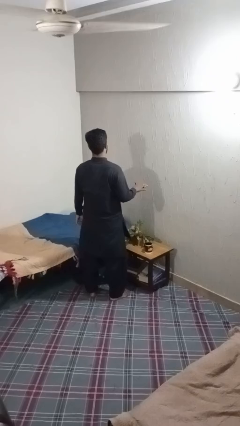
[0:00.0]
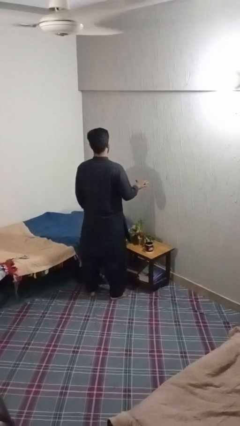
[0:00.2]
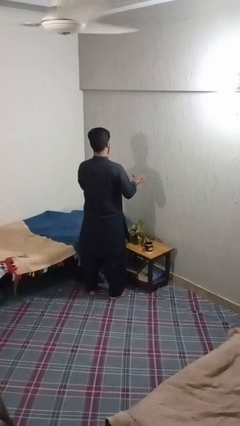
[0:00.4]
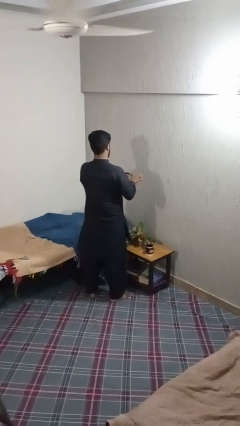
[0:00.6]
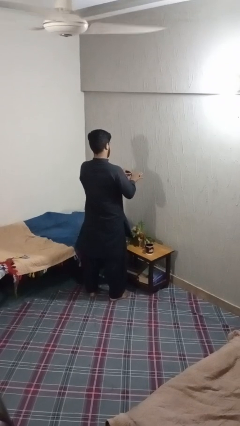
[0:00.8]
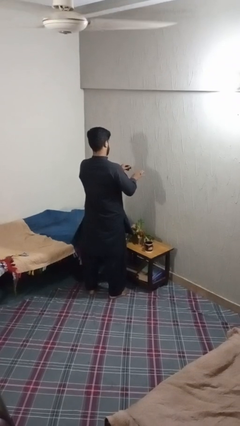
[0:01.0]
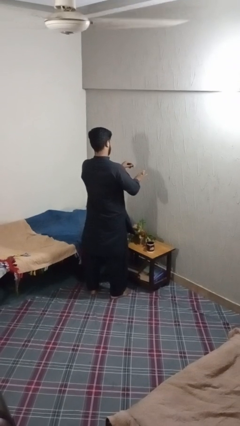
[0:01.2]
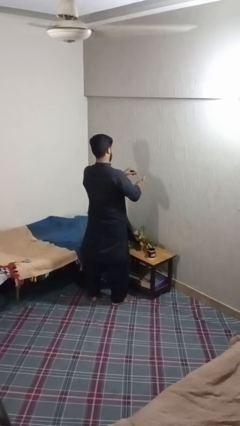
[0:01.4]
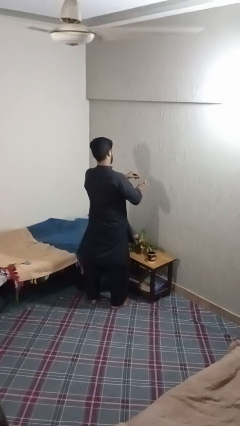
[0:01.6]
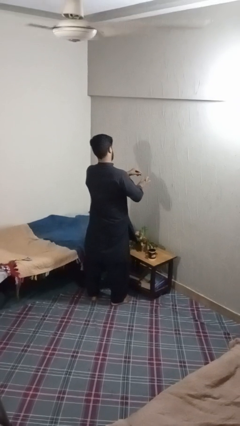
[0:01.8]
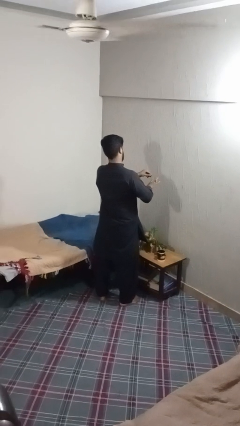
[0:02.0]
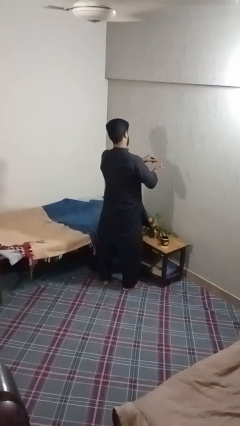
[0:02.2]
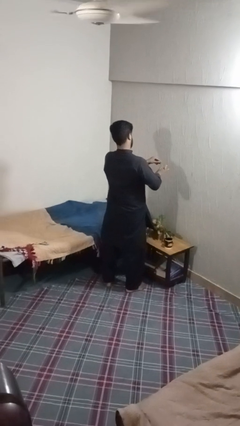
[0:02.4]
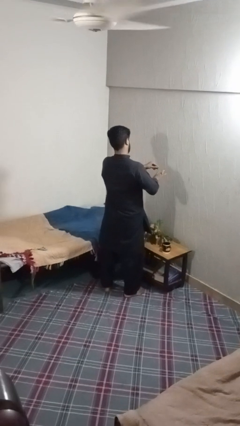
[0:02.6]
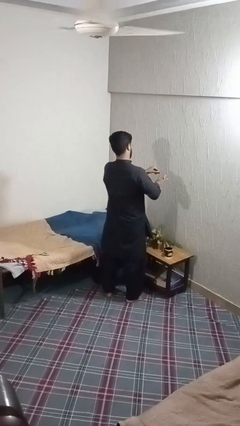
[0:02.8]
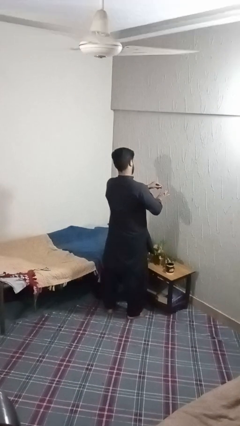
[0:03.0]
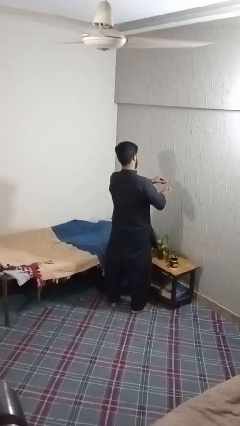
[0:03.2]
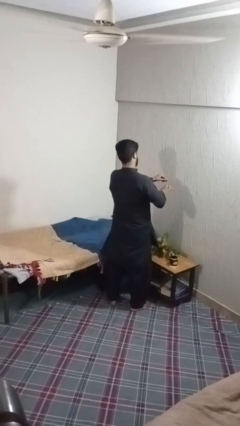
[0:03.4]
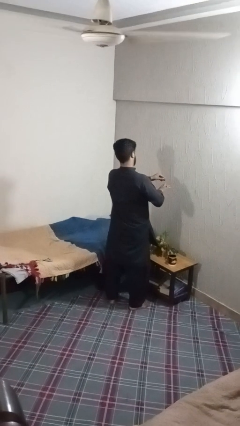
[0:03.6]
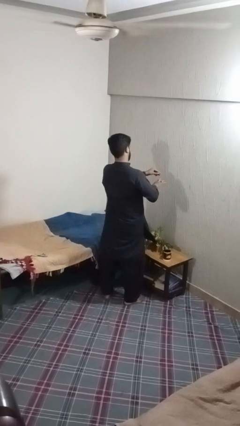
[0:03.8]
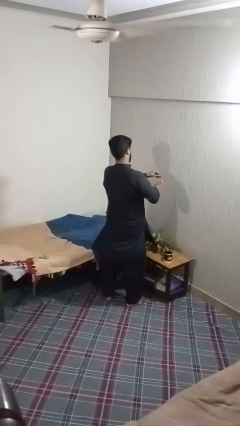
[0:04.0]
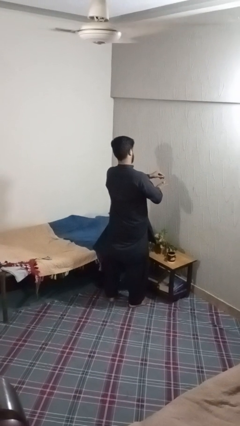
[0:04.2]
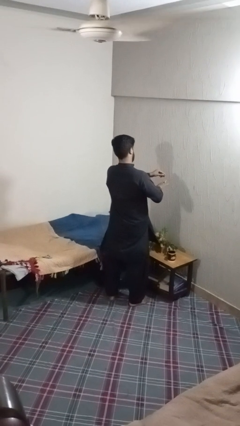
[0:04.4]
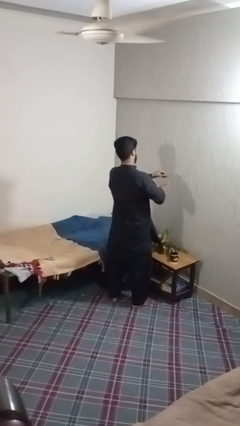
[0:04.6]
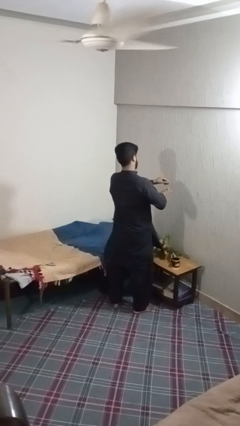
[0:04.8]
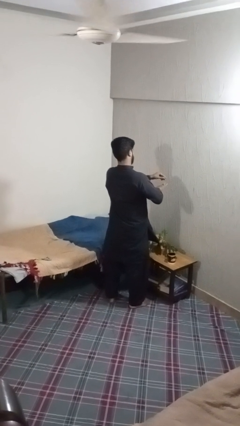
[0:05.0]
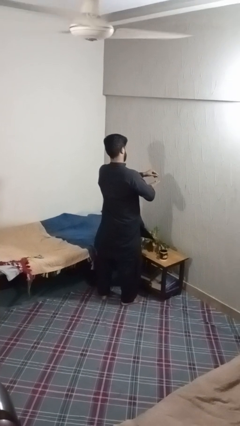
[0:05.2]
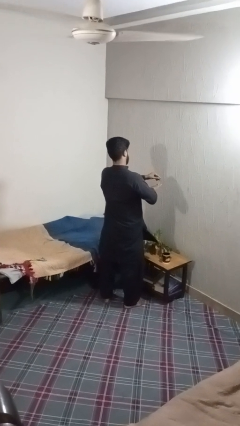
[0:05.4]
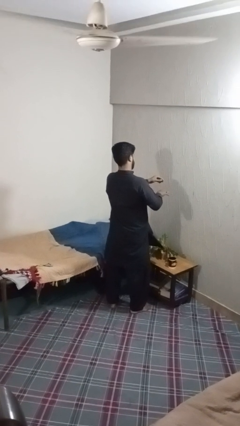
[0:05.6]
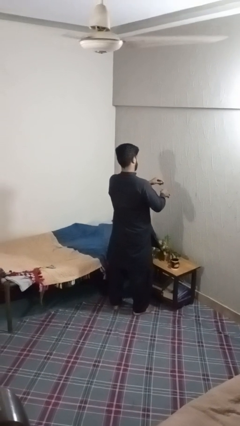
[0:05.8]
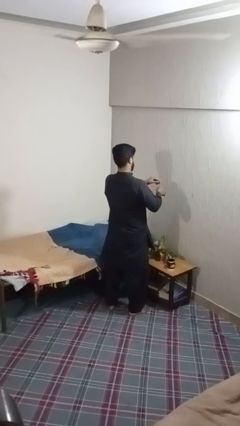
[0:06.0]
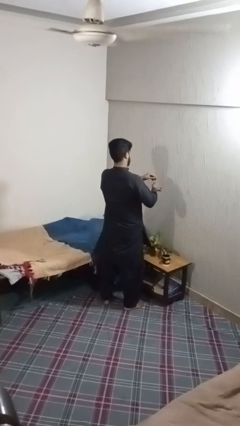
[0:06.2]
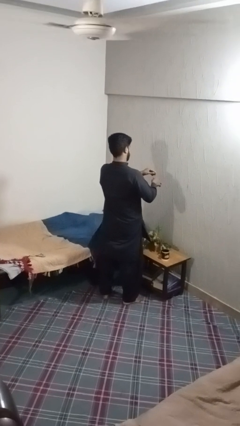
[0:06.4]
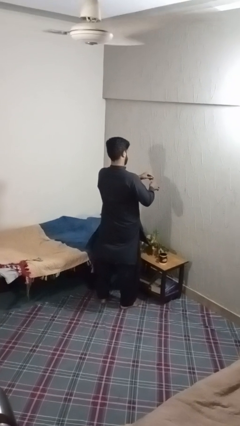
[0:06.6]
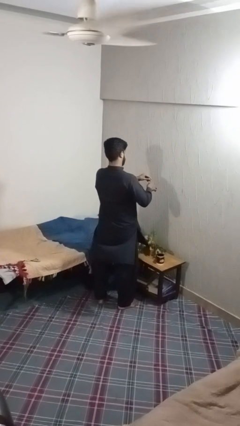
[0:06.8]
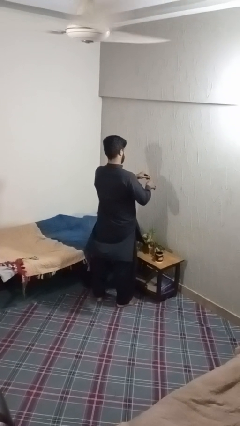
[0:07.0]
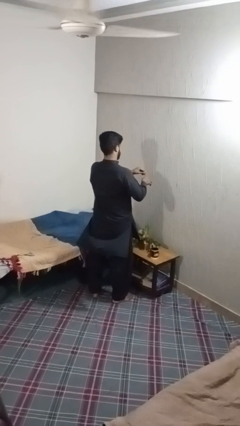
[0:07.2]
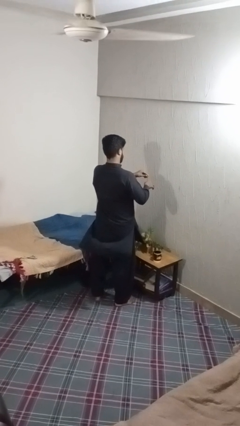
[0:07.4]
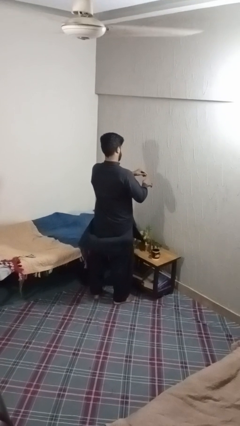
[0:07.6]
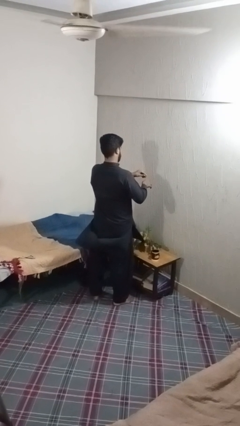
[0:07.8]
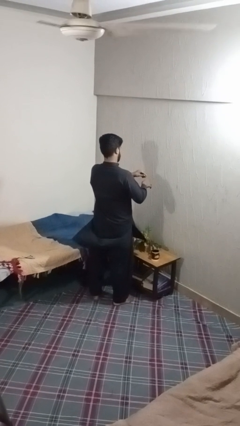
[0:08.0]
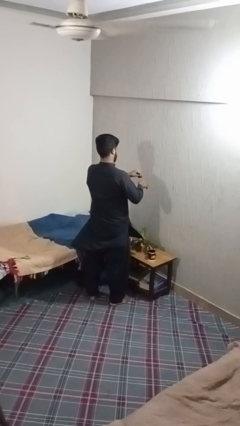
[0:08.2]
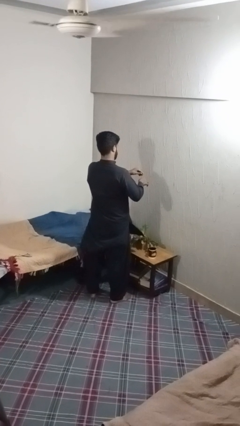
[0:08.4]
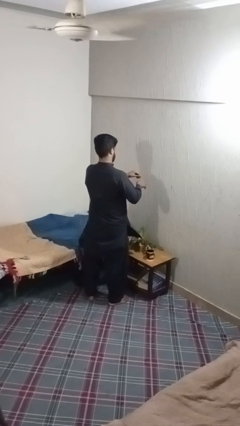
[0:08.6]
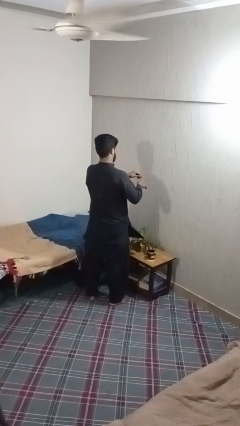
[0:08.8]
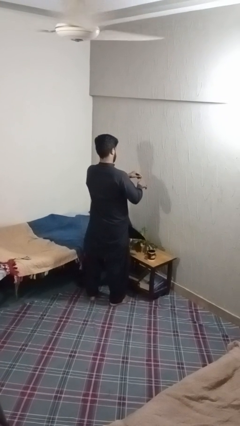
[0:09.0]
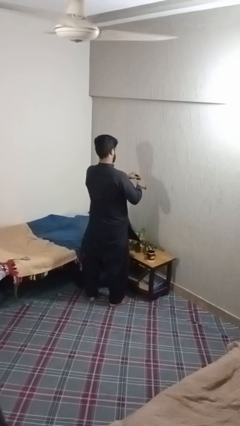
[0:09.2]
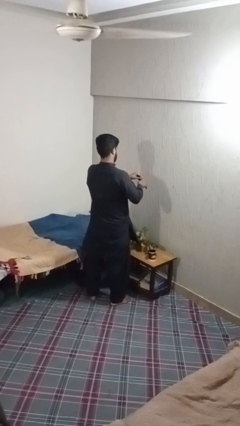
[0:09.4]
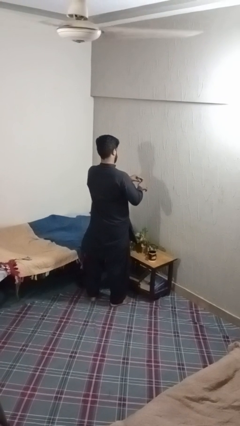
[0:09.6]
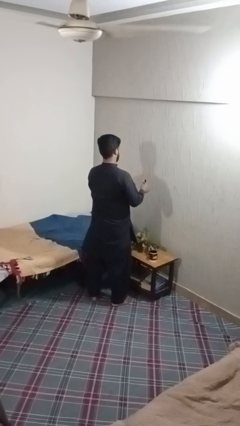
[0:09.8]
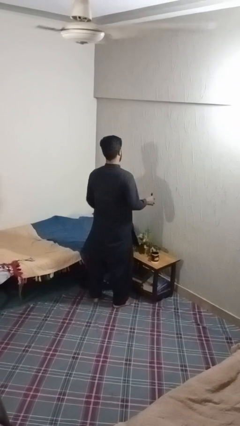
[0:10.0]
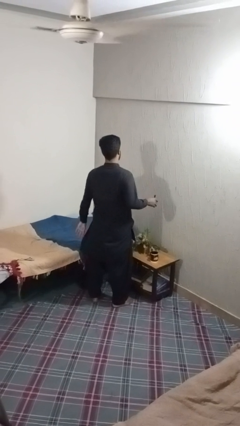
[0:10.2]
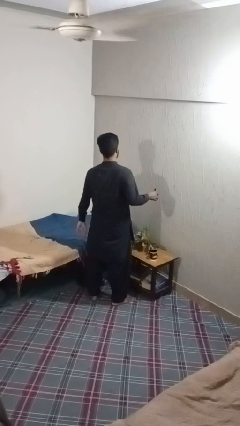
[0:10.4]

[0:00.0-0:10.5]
person paints fingernails

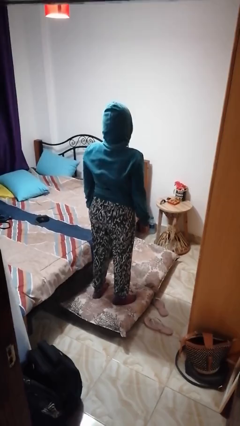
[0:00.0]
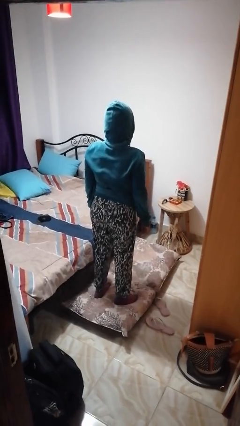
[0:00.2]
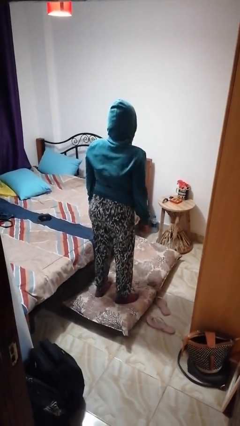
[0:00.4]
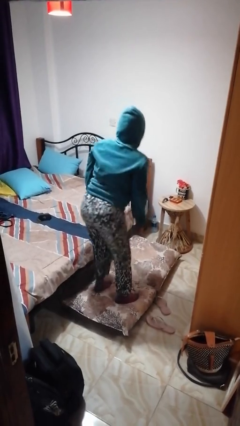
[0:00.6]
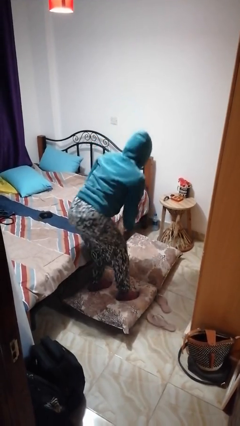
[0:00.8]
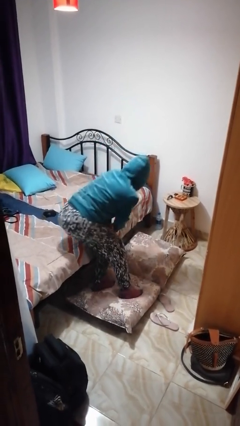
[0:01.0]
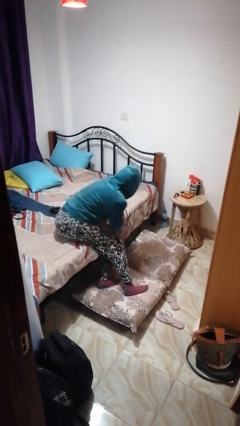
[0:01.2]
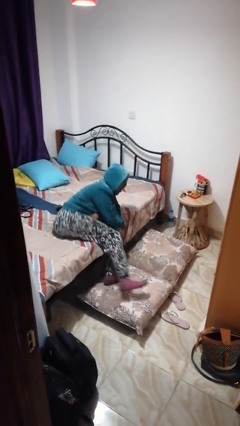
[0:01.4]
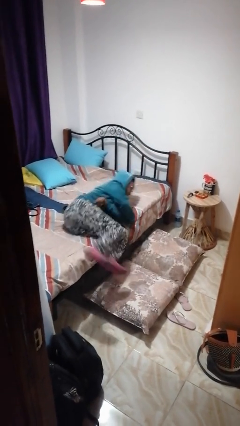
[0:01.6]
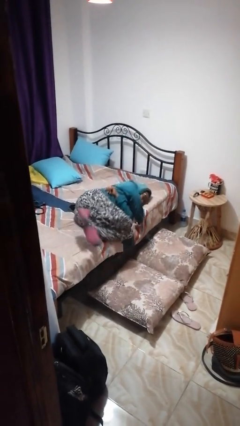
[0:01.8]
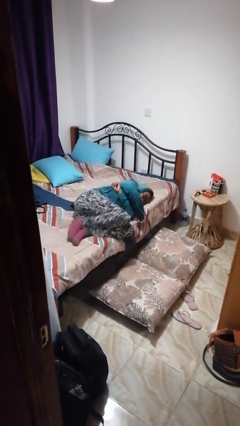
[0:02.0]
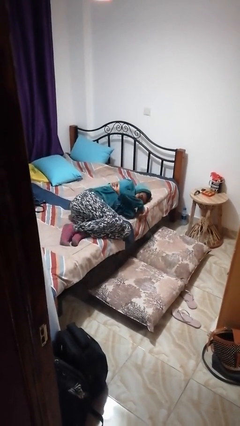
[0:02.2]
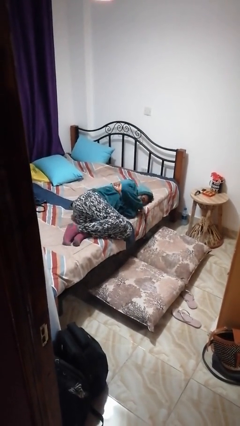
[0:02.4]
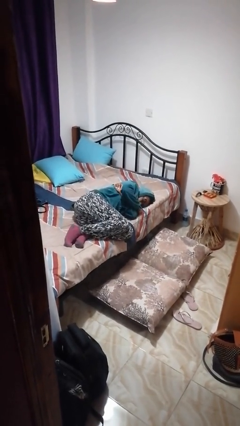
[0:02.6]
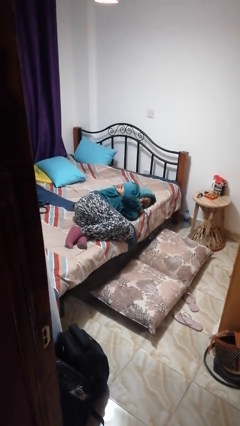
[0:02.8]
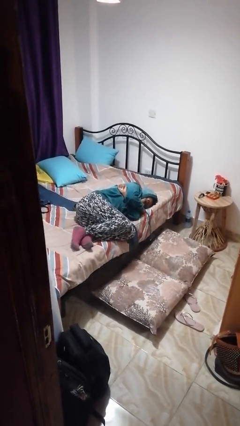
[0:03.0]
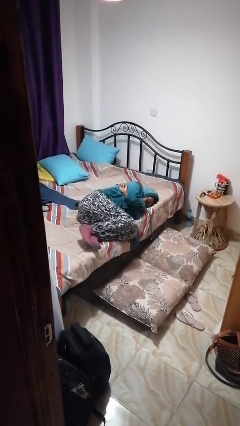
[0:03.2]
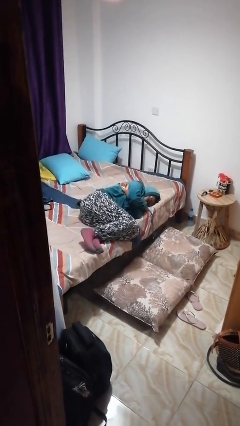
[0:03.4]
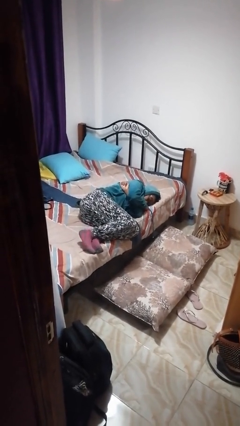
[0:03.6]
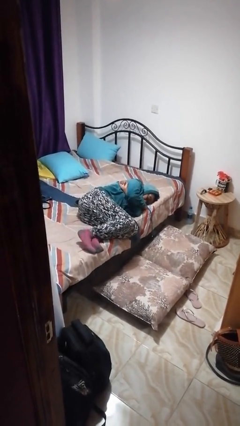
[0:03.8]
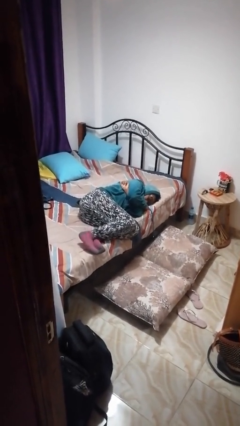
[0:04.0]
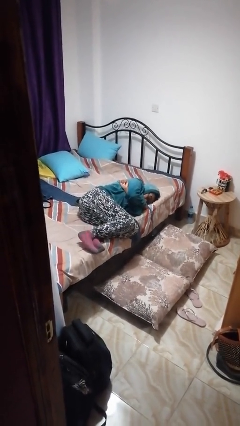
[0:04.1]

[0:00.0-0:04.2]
person lies down on bed

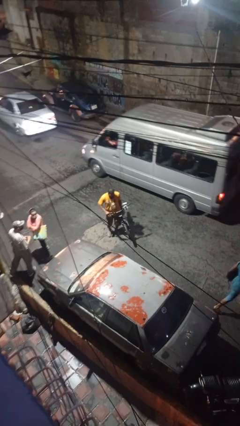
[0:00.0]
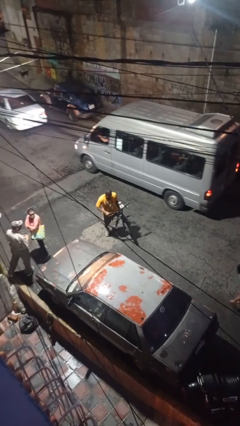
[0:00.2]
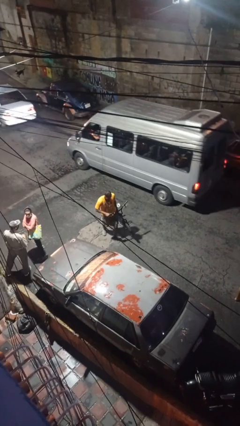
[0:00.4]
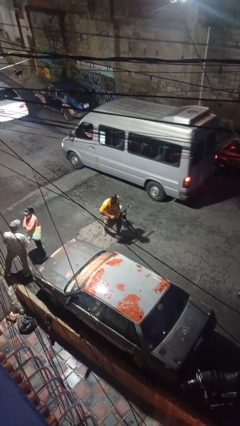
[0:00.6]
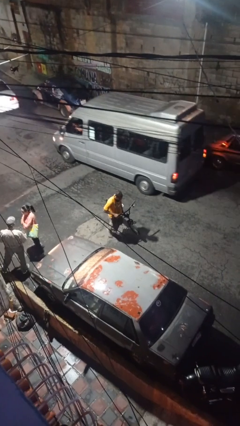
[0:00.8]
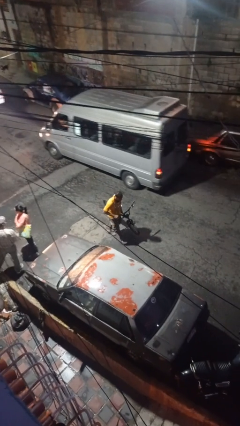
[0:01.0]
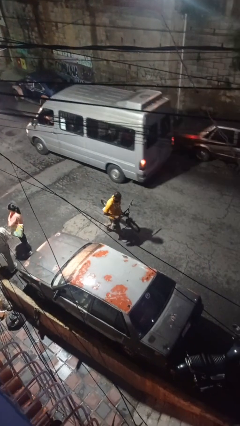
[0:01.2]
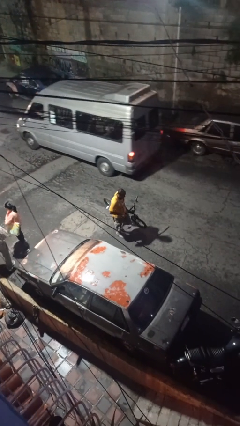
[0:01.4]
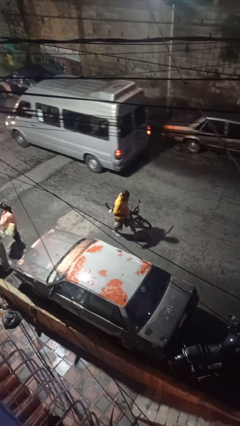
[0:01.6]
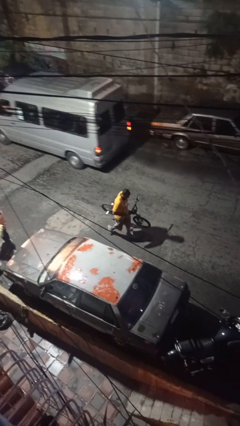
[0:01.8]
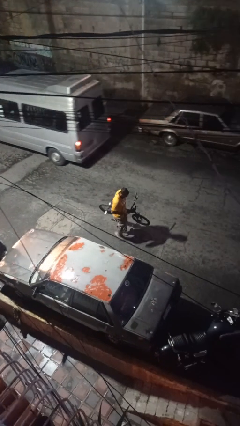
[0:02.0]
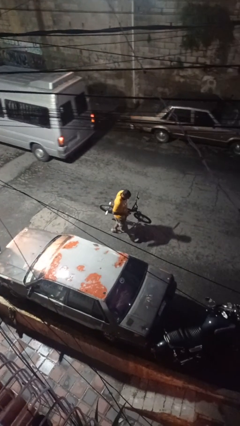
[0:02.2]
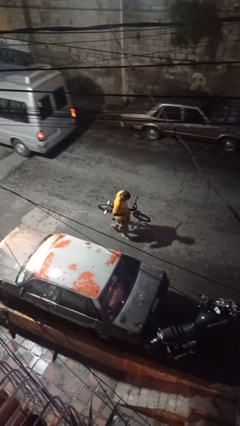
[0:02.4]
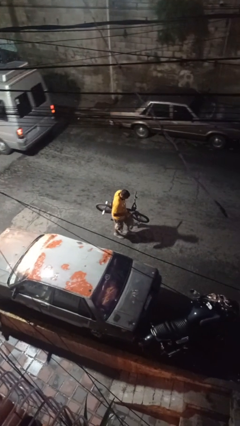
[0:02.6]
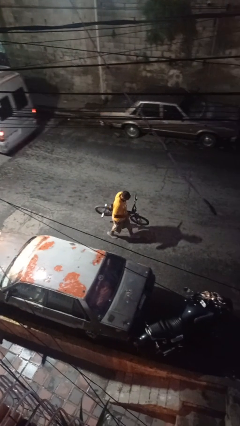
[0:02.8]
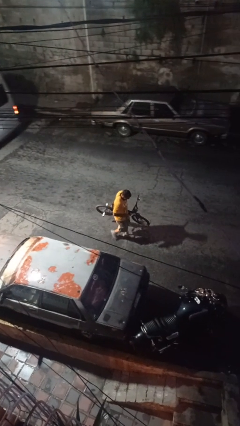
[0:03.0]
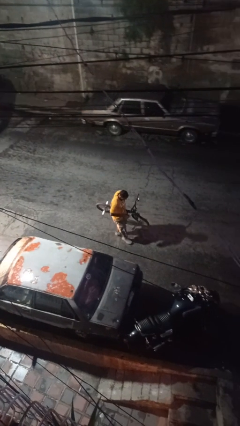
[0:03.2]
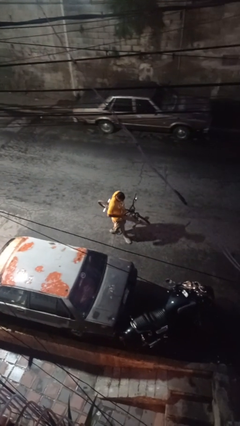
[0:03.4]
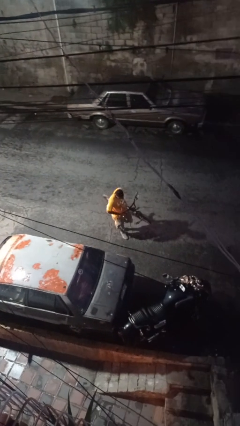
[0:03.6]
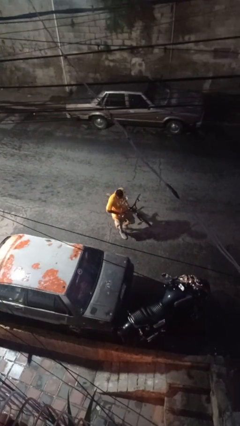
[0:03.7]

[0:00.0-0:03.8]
person carries bicycle
